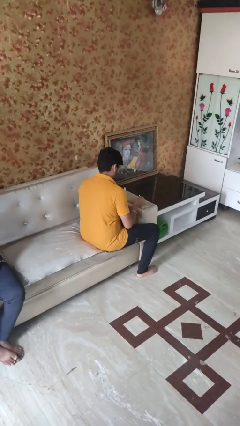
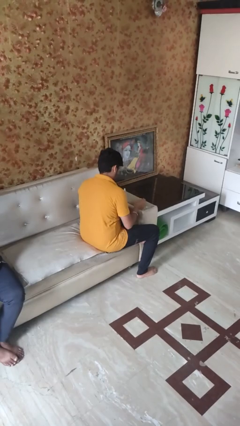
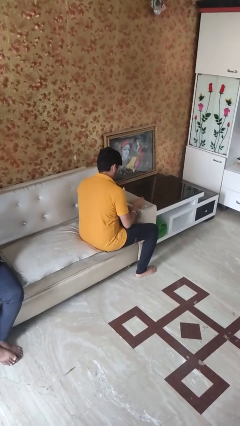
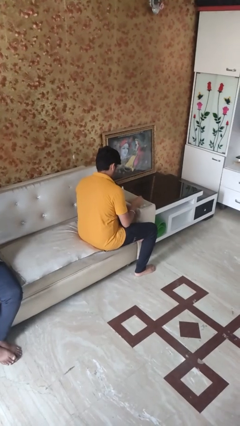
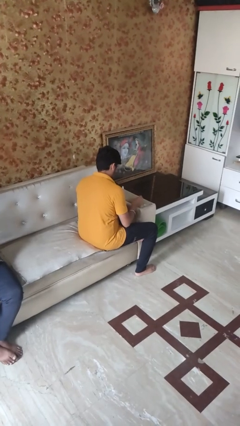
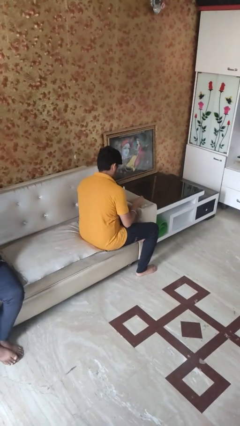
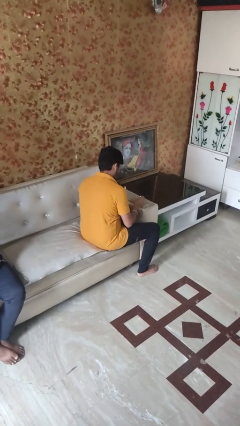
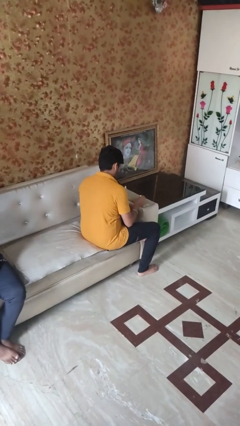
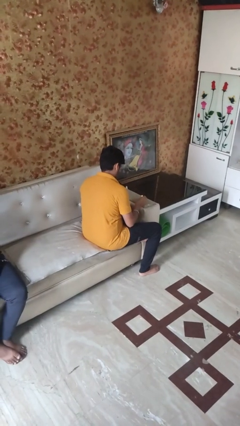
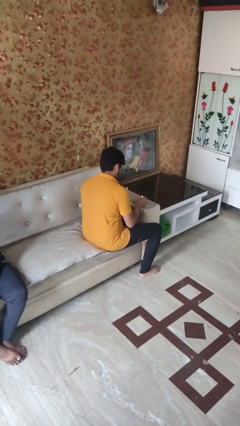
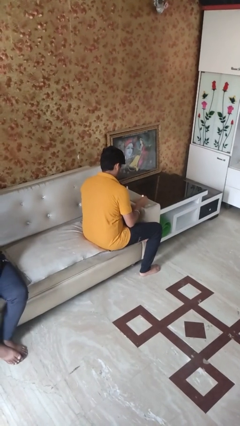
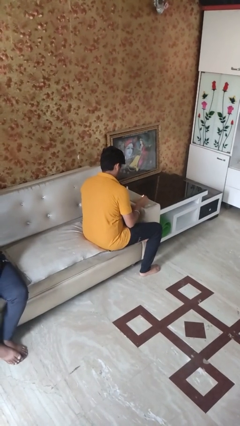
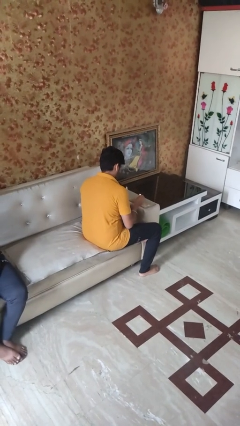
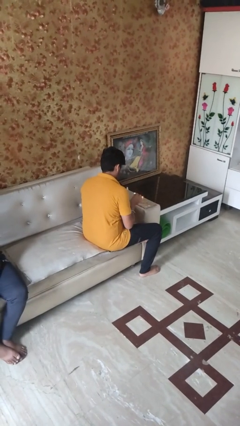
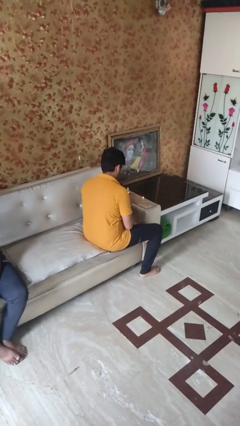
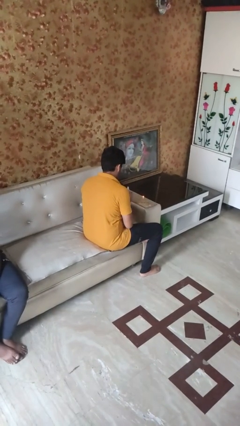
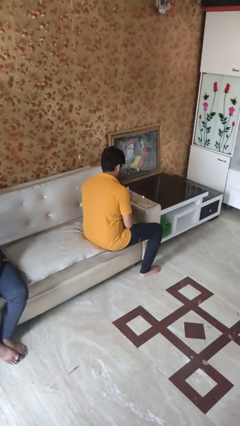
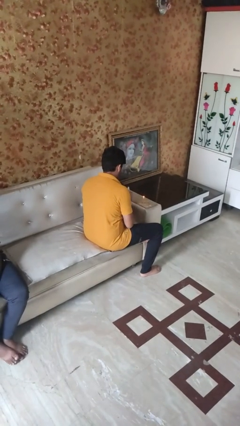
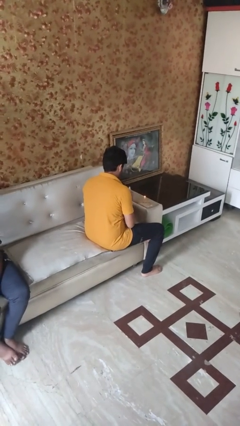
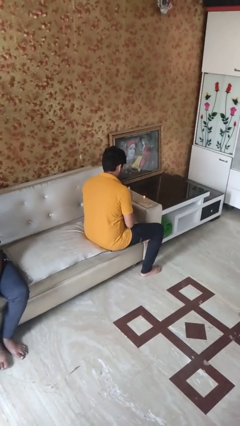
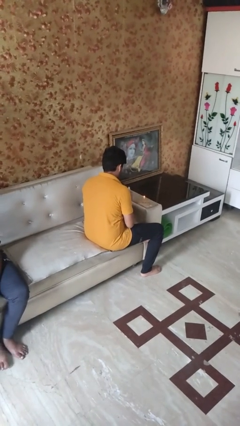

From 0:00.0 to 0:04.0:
person lights candle

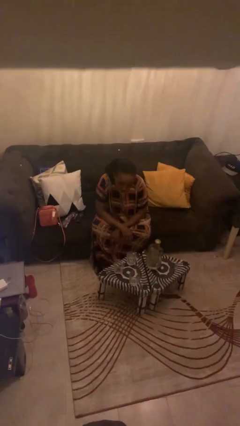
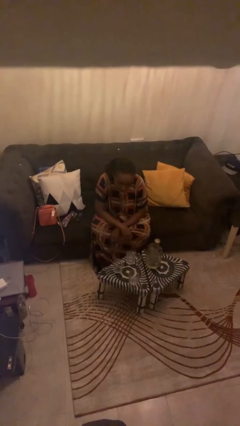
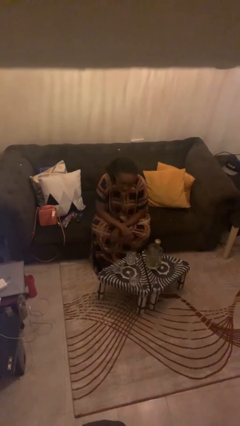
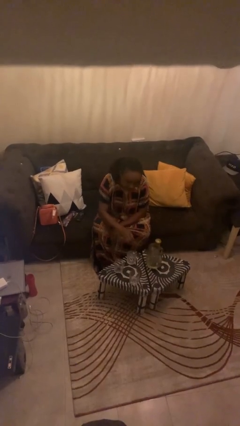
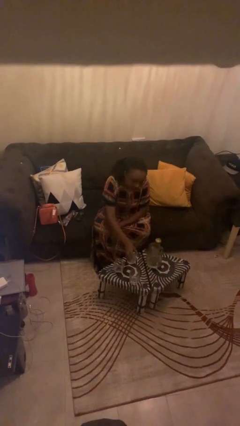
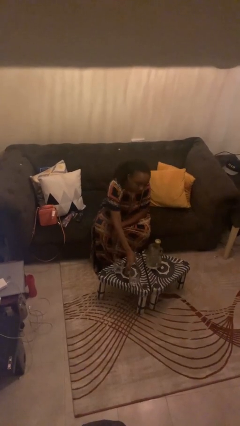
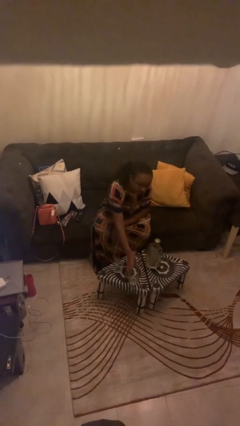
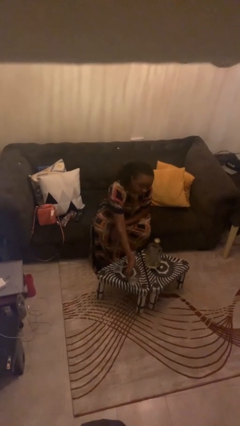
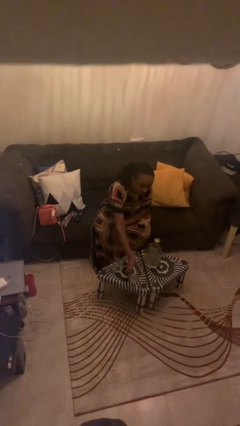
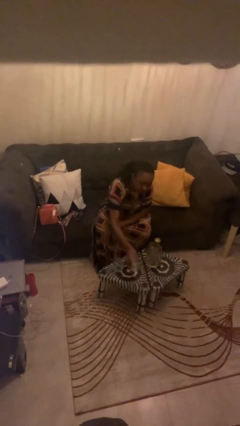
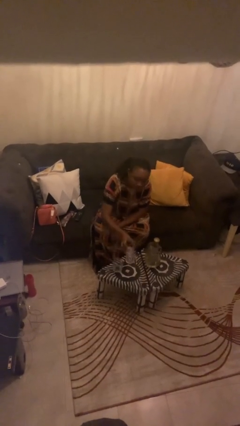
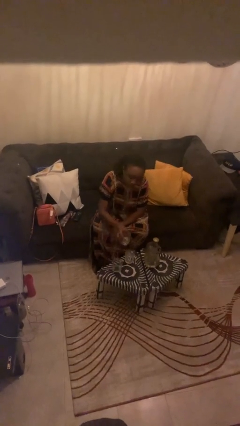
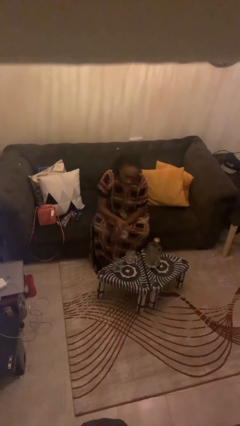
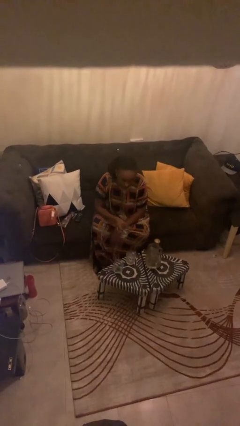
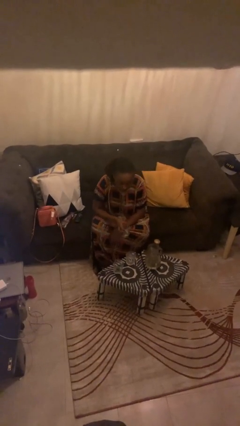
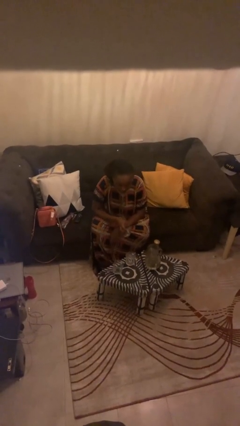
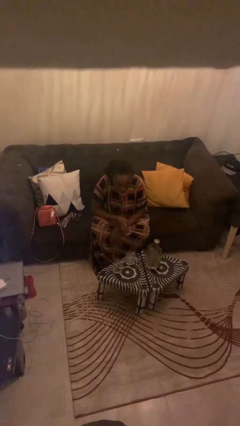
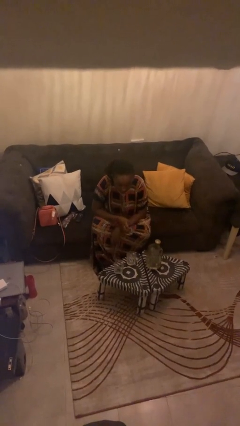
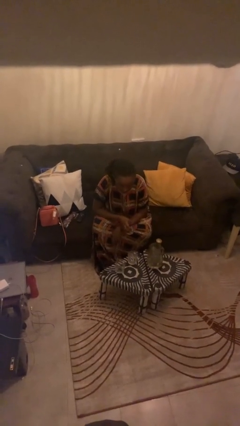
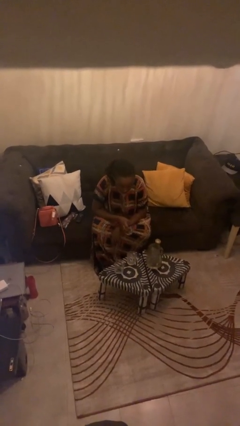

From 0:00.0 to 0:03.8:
person picks up object from table

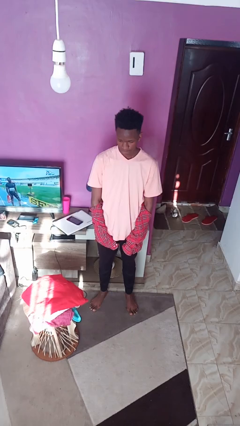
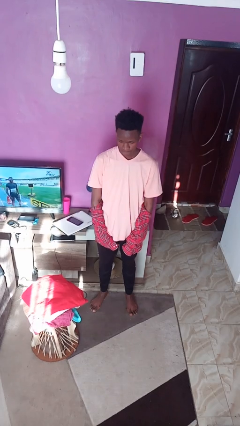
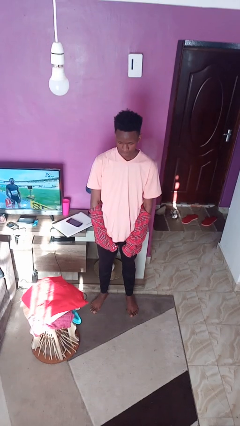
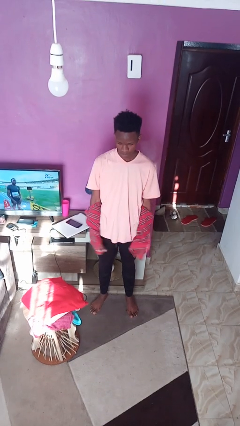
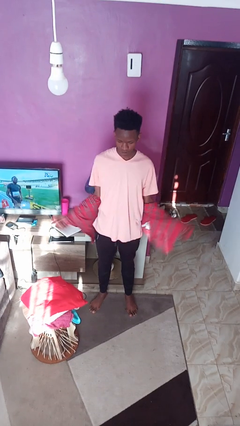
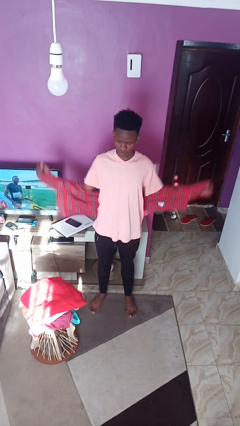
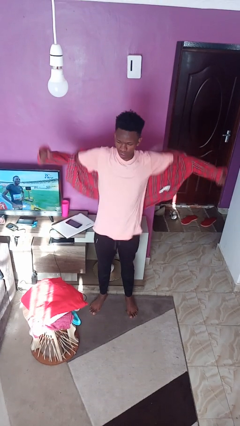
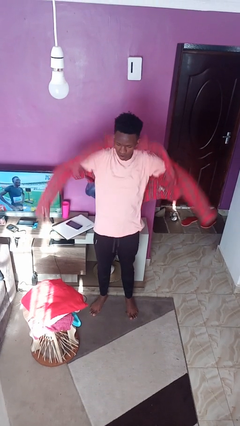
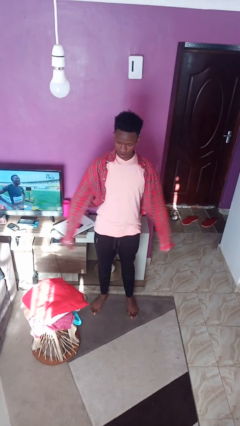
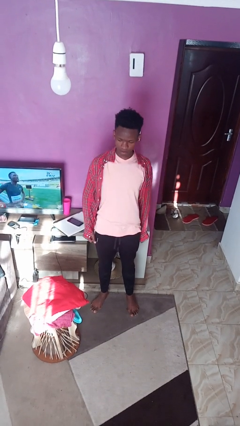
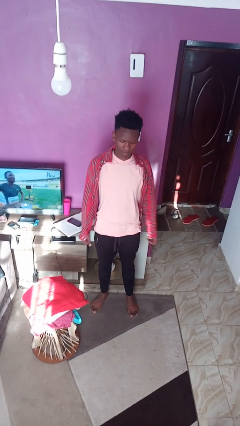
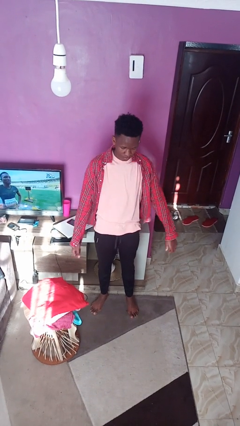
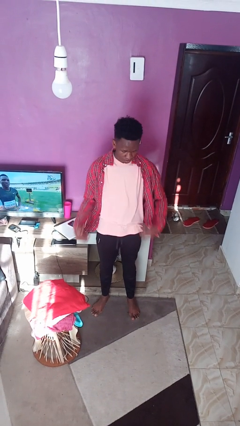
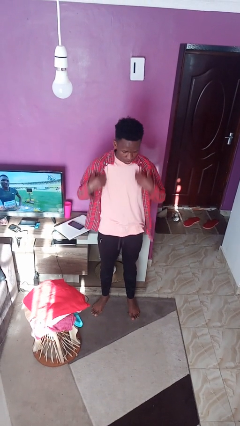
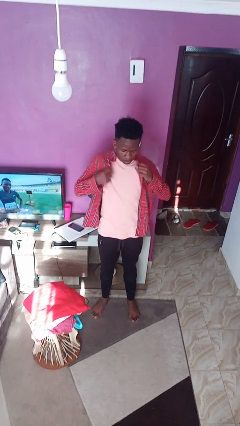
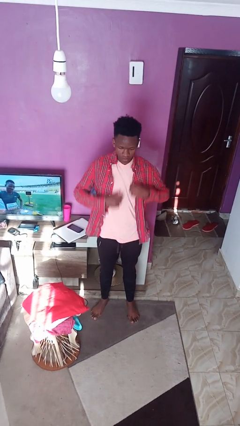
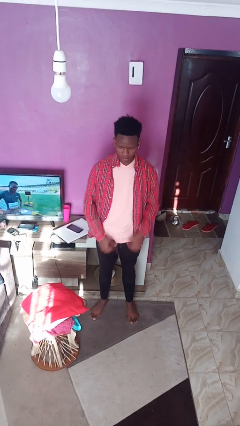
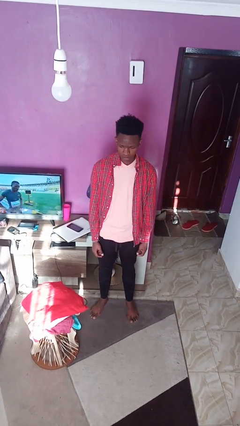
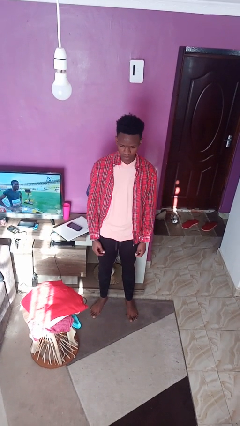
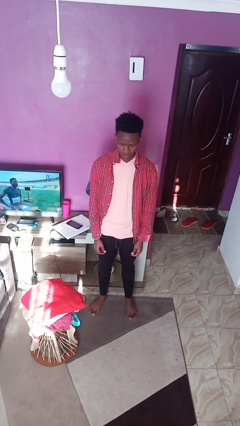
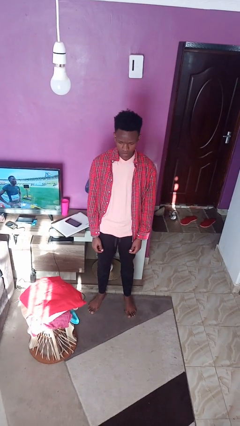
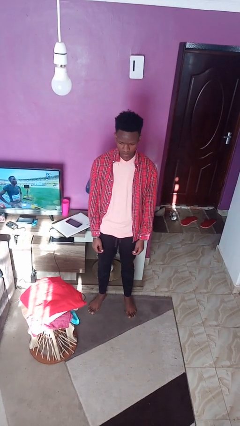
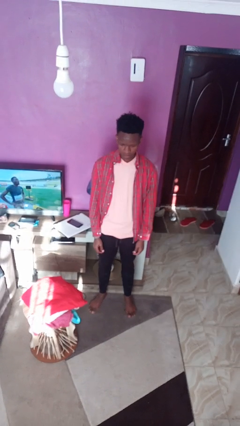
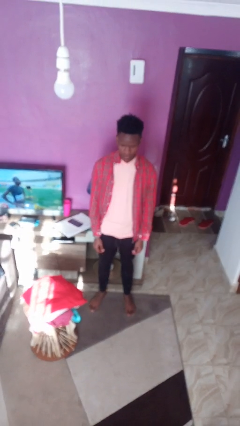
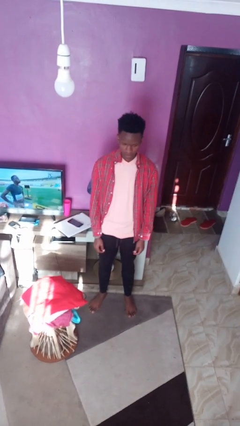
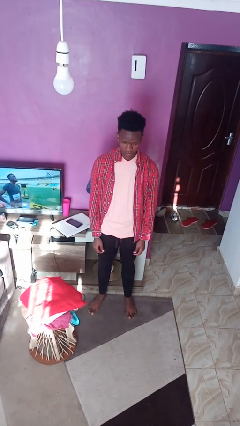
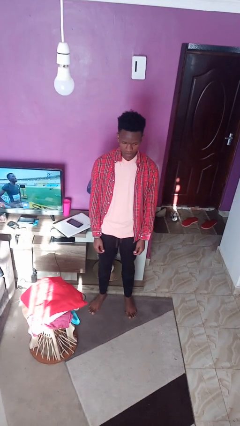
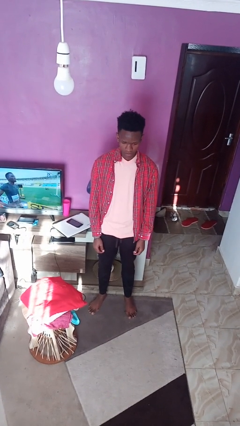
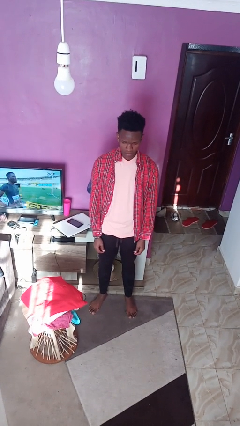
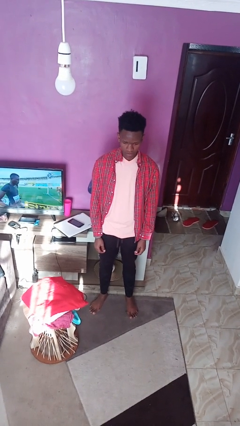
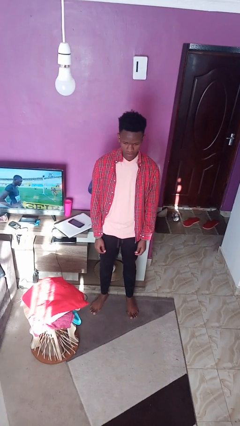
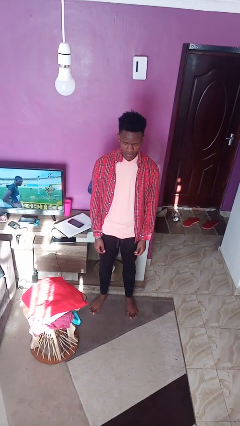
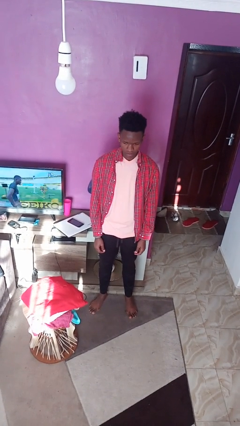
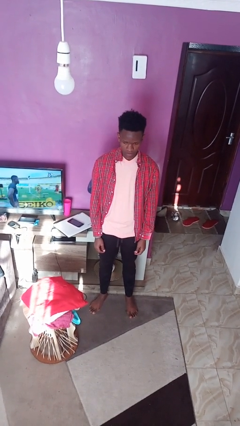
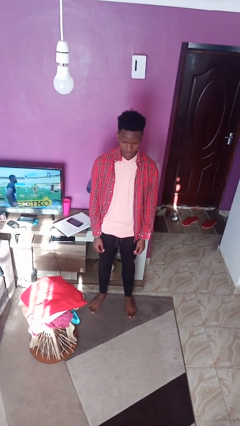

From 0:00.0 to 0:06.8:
person puts on shirt

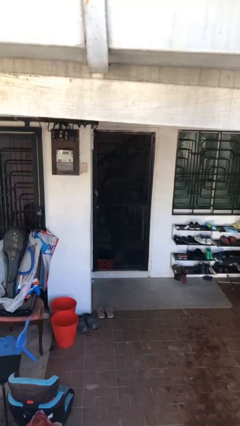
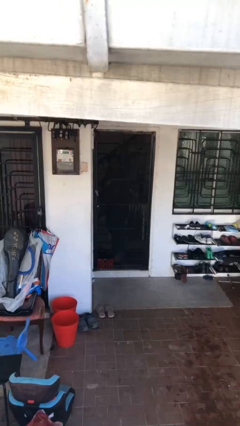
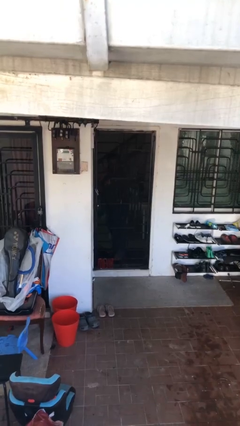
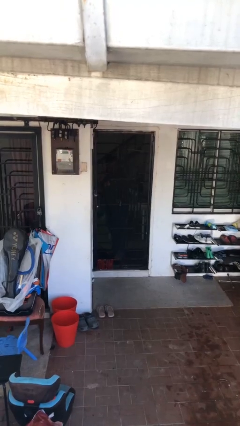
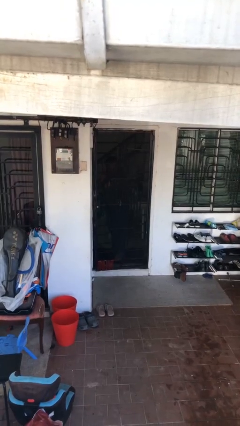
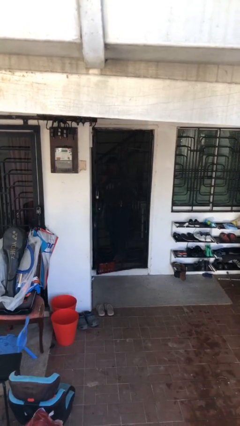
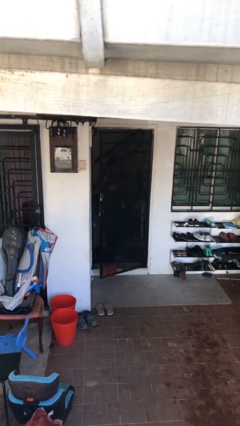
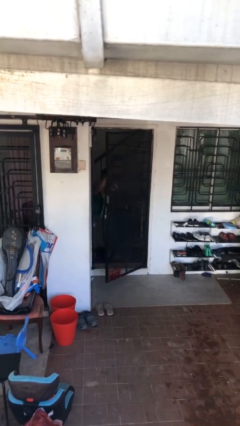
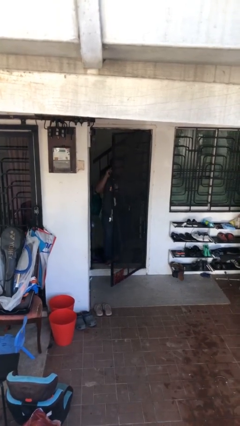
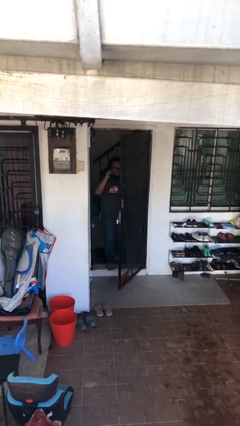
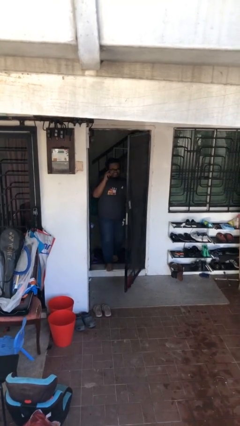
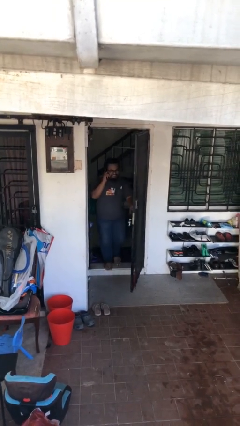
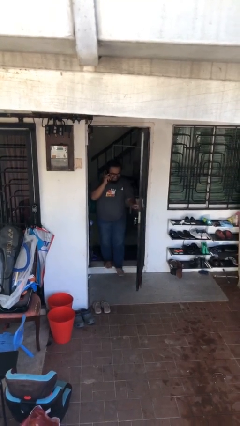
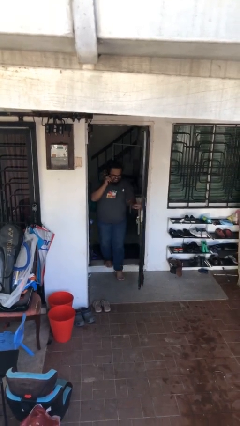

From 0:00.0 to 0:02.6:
person opens facility door

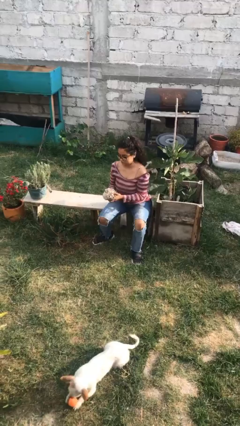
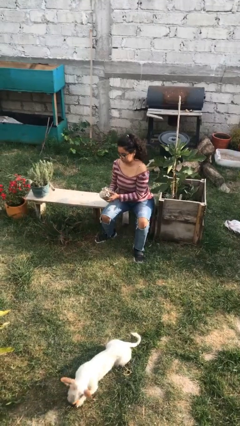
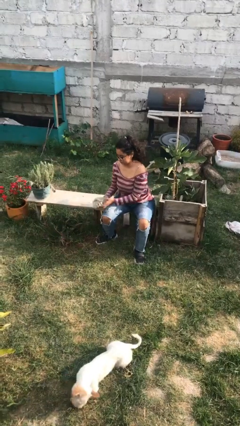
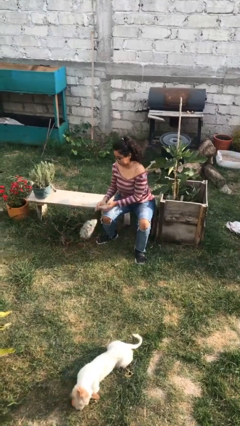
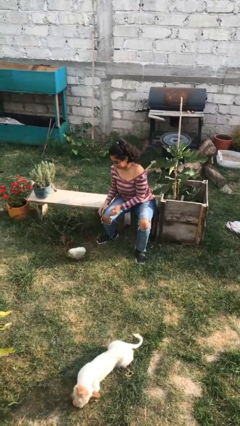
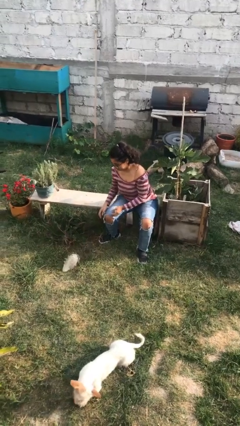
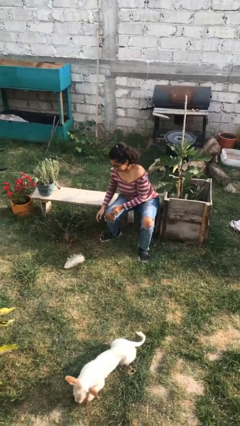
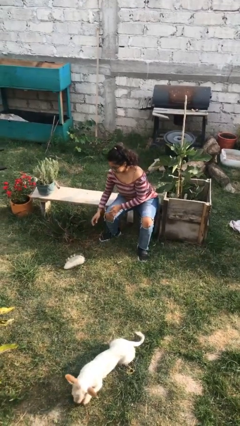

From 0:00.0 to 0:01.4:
person drops object
